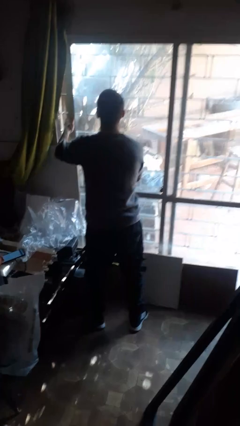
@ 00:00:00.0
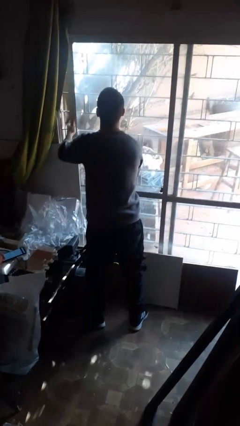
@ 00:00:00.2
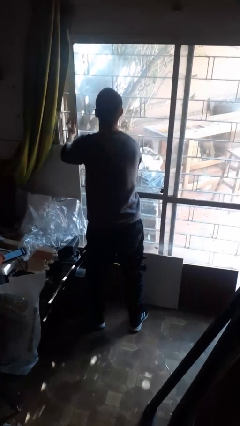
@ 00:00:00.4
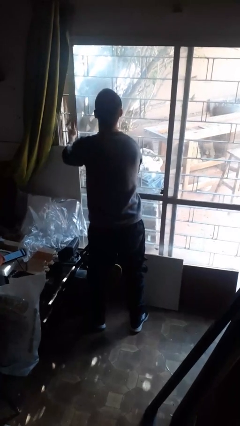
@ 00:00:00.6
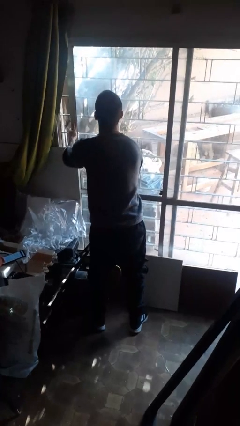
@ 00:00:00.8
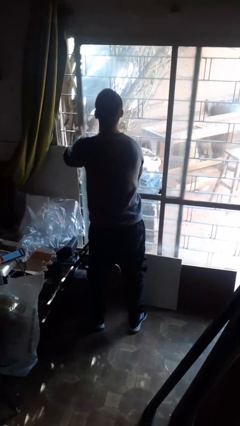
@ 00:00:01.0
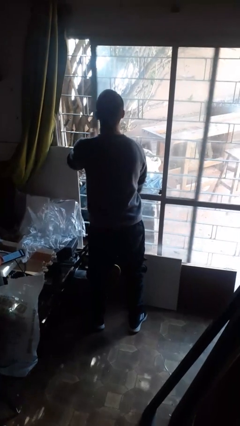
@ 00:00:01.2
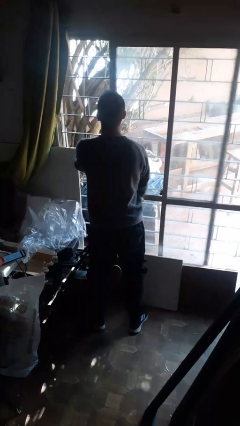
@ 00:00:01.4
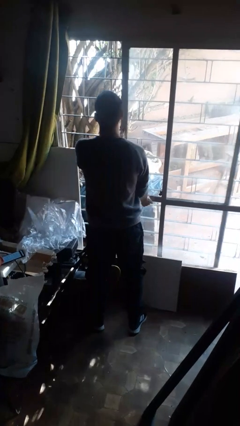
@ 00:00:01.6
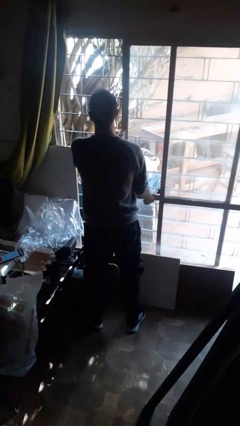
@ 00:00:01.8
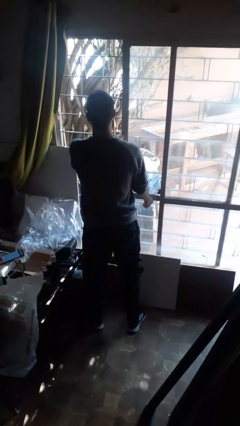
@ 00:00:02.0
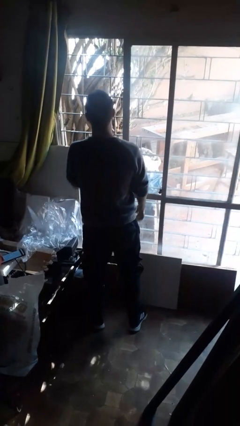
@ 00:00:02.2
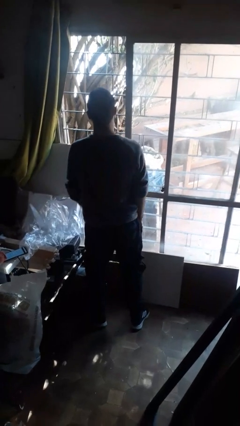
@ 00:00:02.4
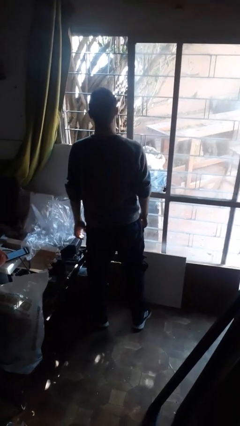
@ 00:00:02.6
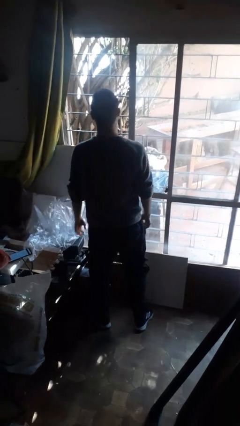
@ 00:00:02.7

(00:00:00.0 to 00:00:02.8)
person opens sliding door

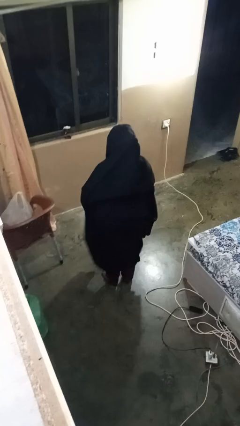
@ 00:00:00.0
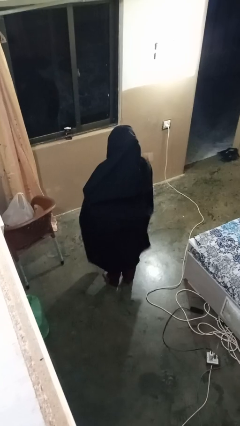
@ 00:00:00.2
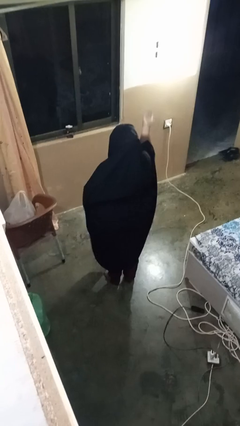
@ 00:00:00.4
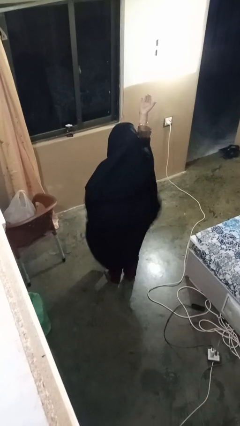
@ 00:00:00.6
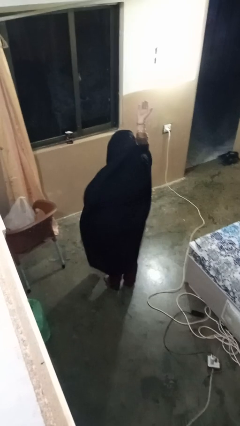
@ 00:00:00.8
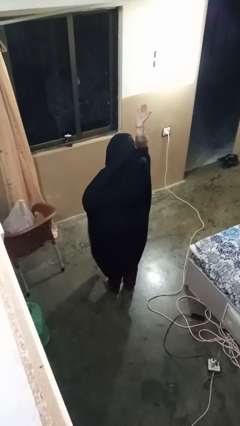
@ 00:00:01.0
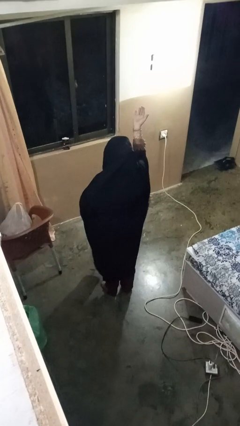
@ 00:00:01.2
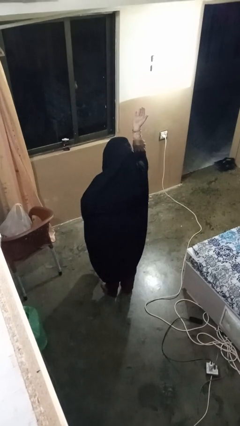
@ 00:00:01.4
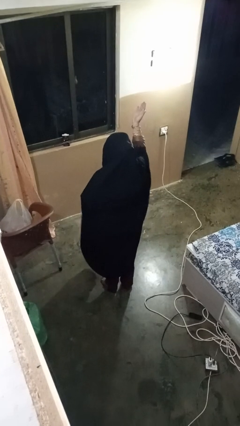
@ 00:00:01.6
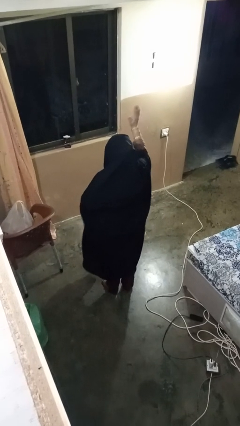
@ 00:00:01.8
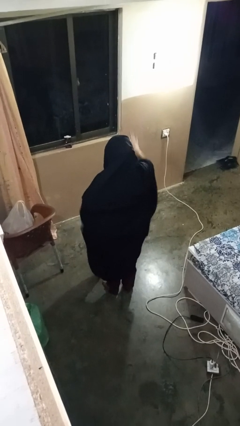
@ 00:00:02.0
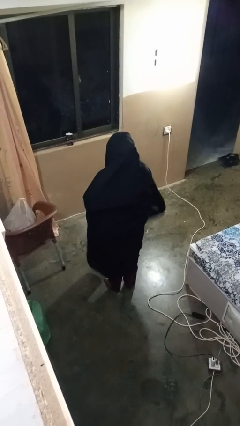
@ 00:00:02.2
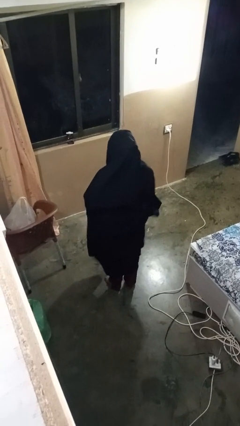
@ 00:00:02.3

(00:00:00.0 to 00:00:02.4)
person gestures swipe up

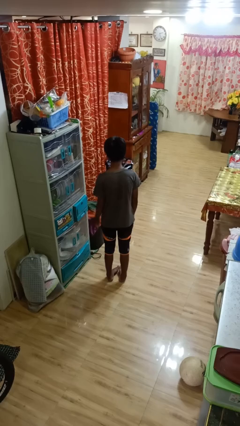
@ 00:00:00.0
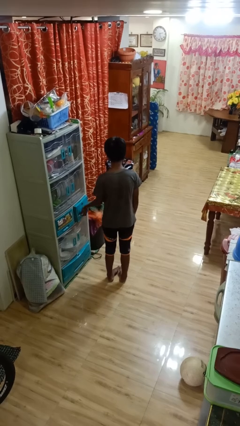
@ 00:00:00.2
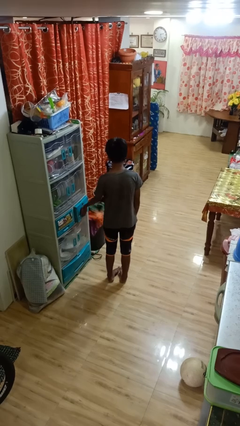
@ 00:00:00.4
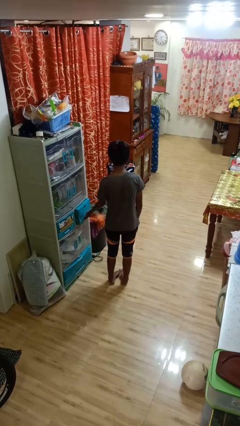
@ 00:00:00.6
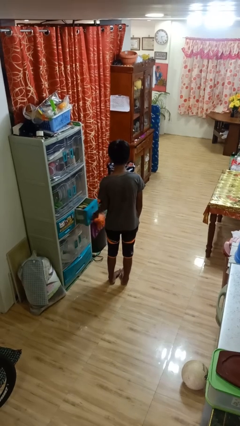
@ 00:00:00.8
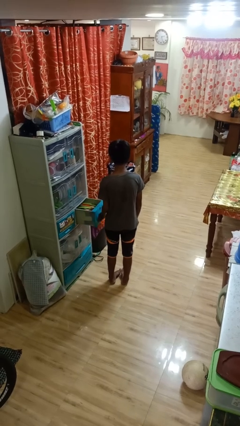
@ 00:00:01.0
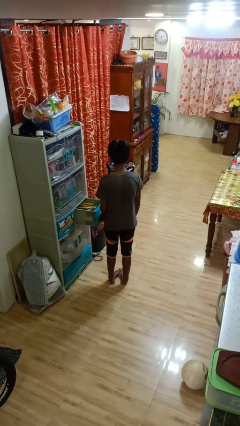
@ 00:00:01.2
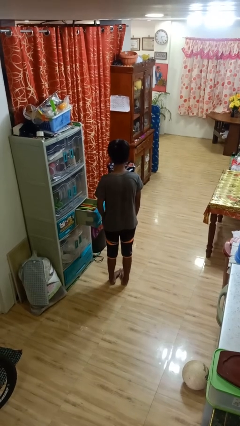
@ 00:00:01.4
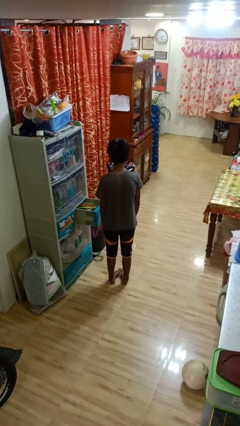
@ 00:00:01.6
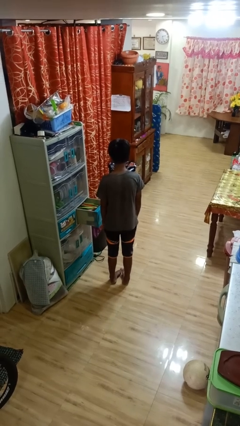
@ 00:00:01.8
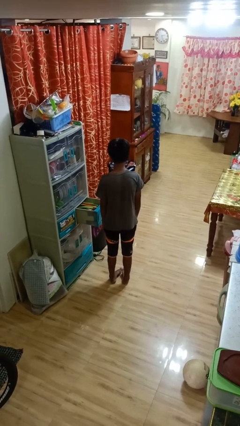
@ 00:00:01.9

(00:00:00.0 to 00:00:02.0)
person opens kitchen drawer

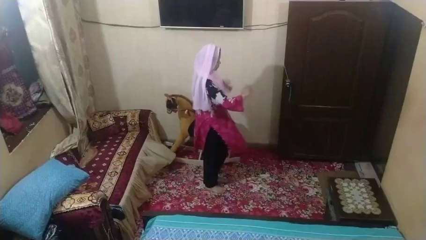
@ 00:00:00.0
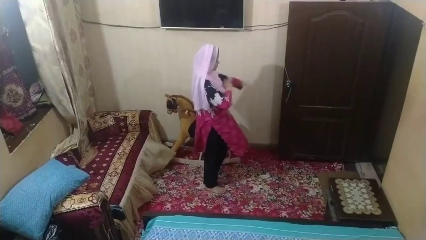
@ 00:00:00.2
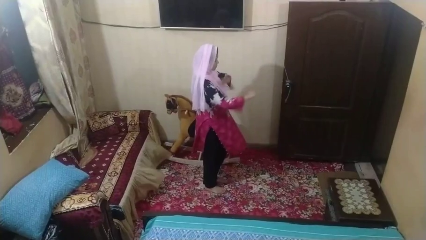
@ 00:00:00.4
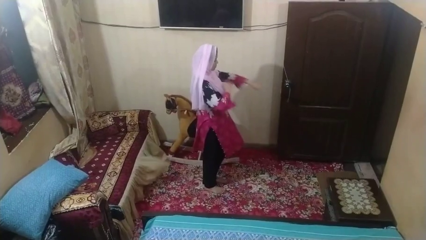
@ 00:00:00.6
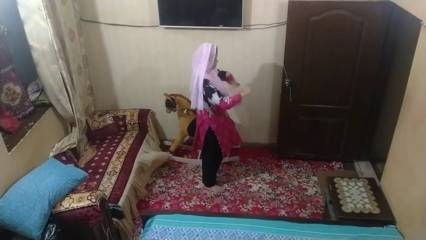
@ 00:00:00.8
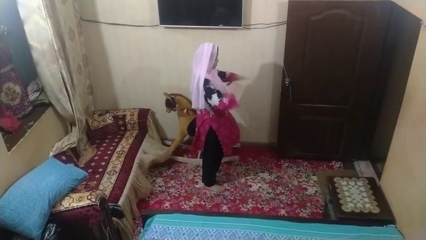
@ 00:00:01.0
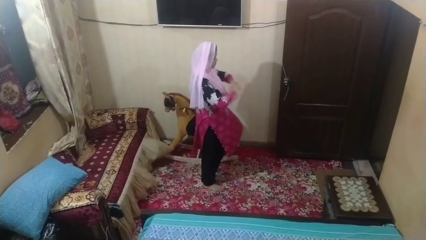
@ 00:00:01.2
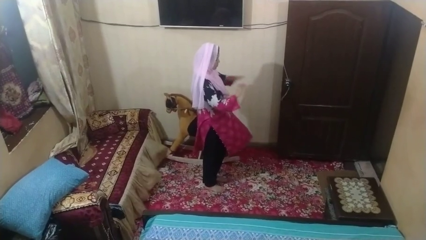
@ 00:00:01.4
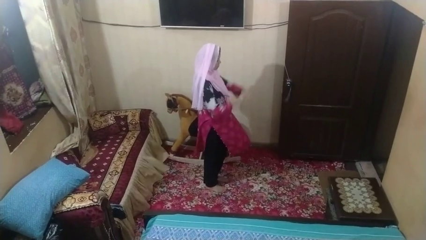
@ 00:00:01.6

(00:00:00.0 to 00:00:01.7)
person karate chop

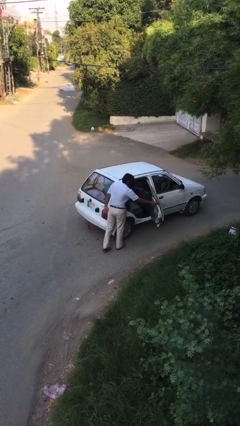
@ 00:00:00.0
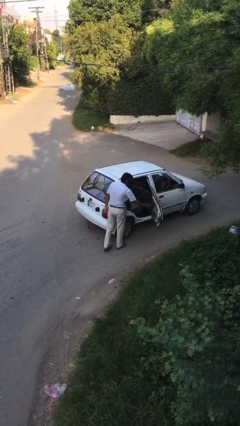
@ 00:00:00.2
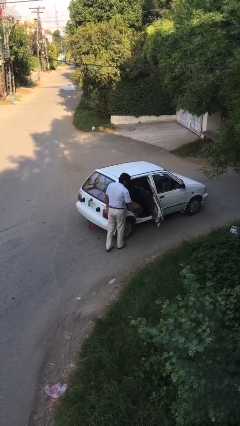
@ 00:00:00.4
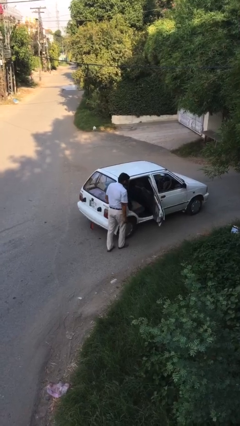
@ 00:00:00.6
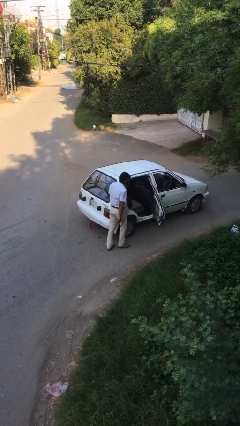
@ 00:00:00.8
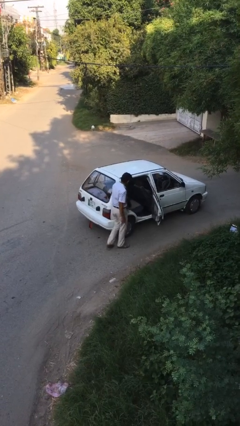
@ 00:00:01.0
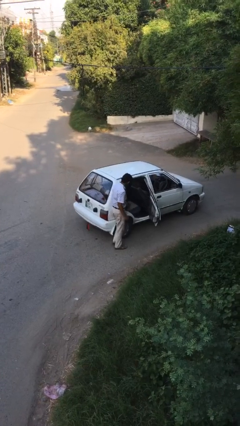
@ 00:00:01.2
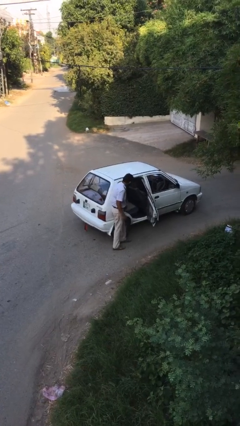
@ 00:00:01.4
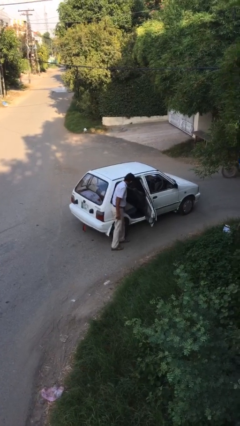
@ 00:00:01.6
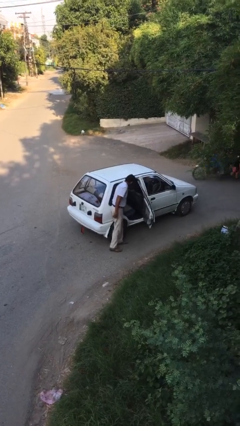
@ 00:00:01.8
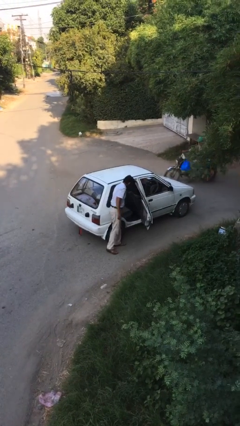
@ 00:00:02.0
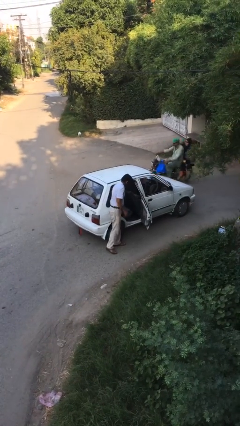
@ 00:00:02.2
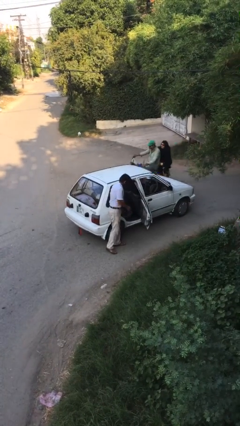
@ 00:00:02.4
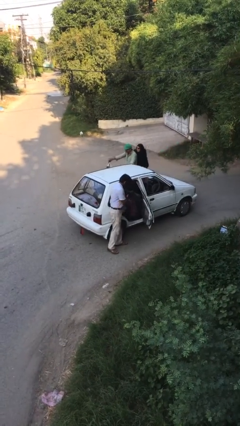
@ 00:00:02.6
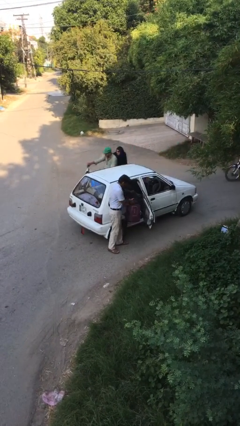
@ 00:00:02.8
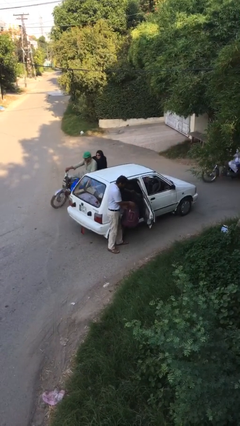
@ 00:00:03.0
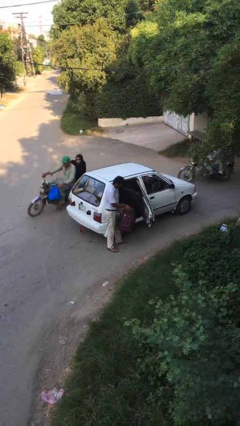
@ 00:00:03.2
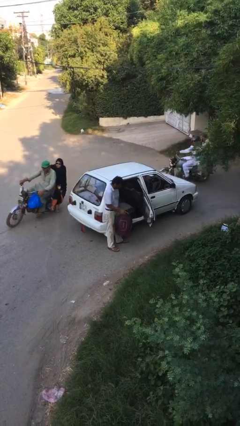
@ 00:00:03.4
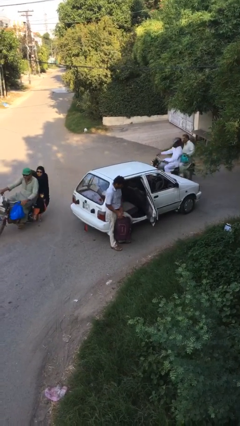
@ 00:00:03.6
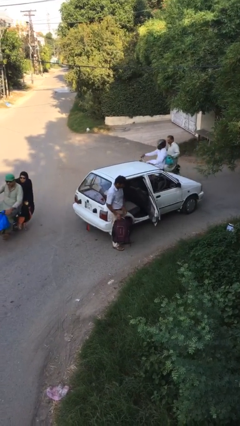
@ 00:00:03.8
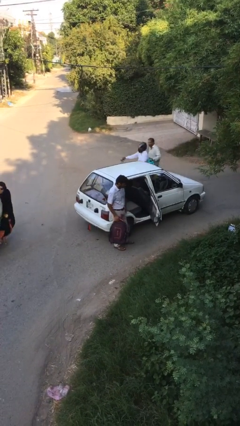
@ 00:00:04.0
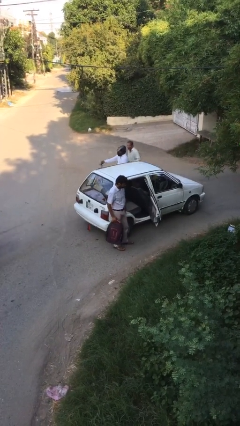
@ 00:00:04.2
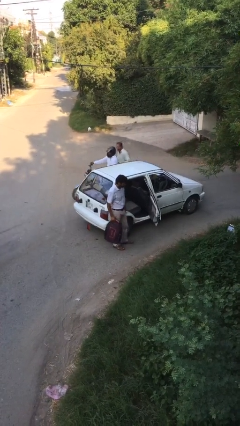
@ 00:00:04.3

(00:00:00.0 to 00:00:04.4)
person unloads car

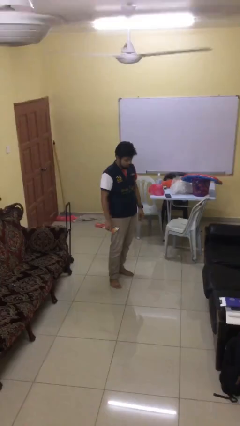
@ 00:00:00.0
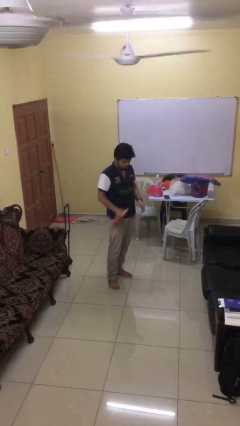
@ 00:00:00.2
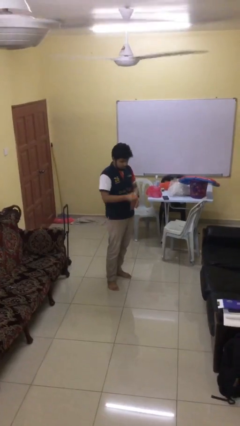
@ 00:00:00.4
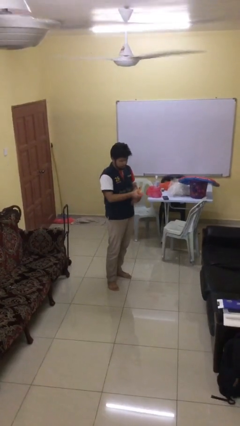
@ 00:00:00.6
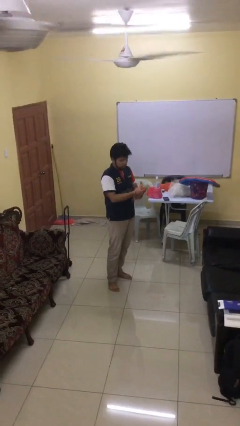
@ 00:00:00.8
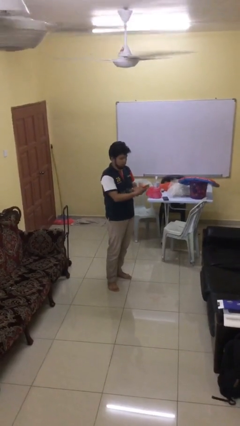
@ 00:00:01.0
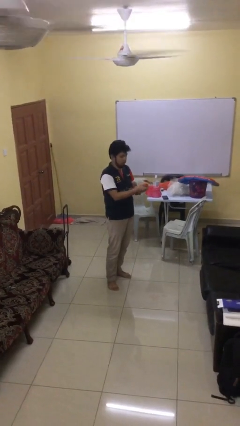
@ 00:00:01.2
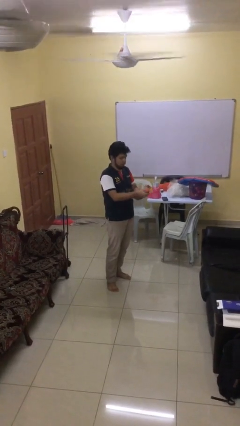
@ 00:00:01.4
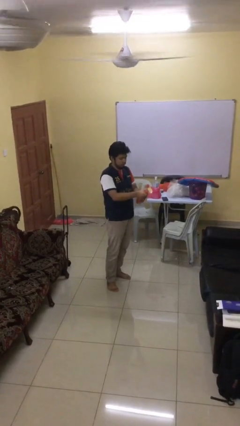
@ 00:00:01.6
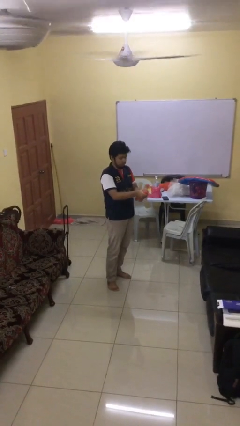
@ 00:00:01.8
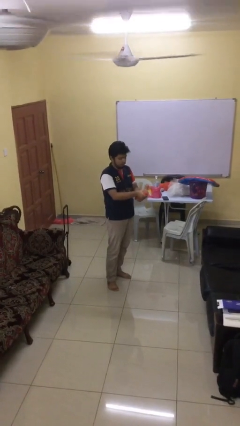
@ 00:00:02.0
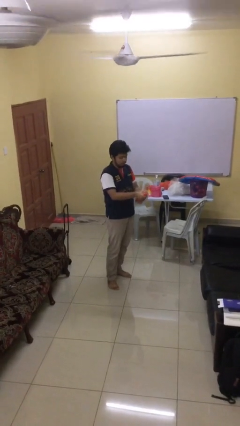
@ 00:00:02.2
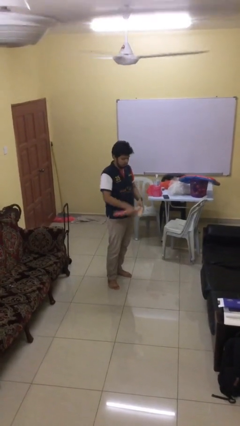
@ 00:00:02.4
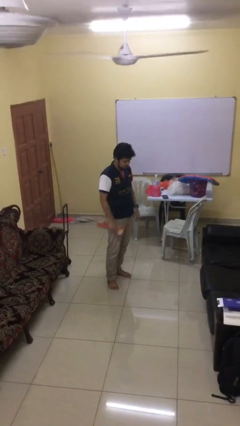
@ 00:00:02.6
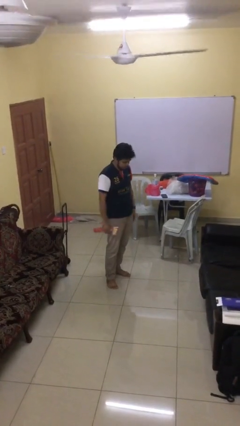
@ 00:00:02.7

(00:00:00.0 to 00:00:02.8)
person squeezes object

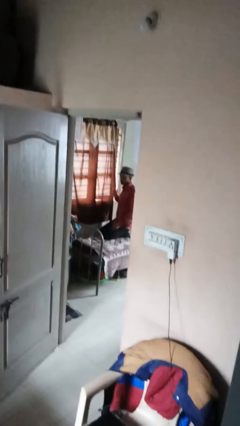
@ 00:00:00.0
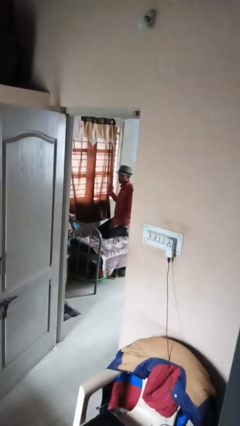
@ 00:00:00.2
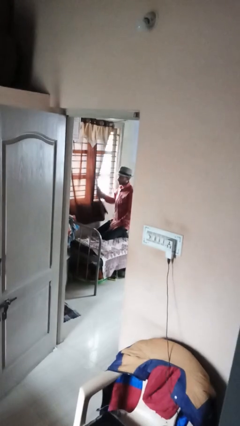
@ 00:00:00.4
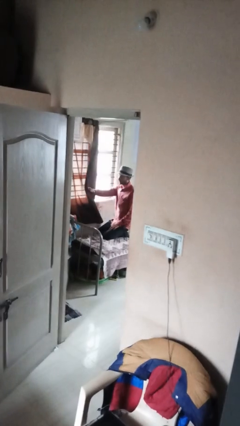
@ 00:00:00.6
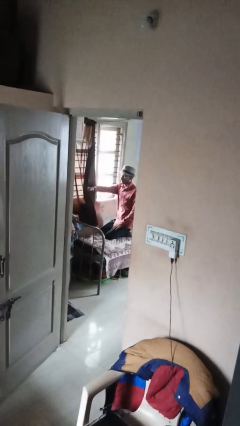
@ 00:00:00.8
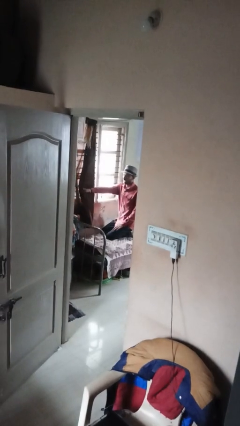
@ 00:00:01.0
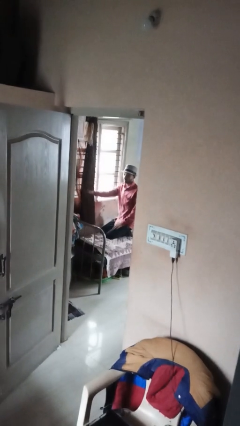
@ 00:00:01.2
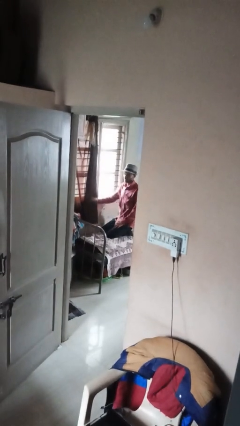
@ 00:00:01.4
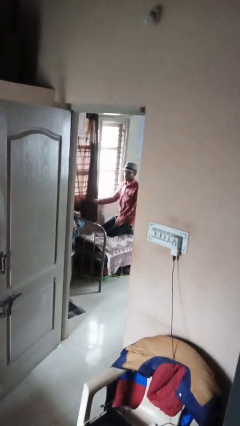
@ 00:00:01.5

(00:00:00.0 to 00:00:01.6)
person opens curtains
